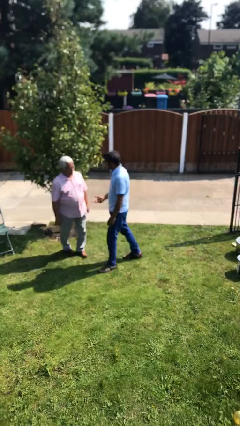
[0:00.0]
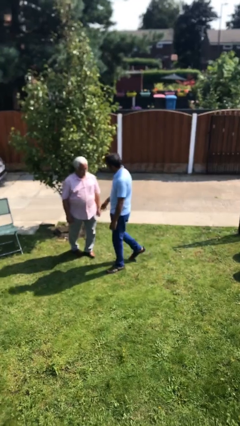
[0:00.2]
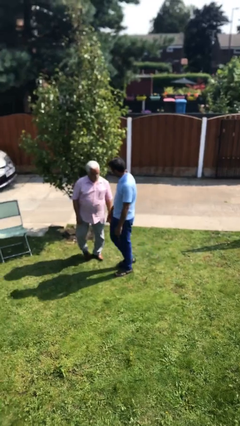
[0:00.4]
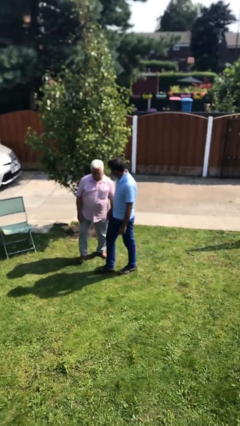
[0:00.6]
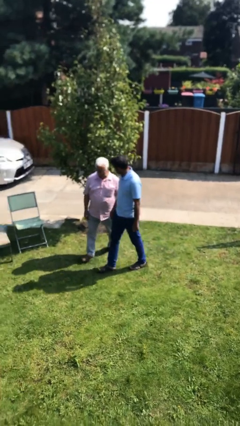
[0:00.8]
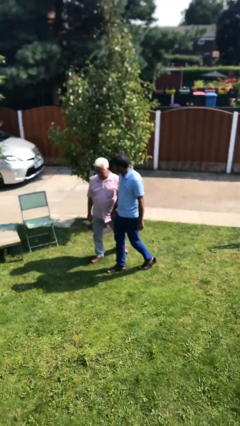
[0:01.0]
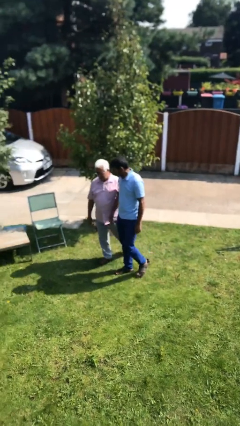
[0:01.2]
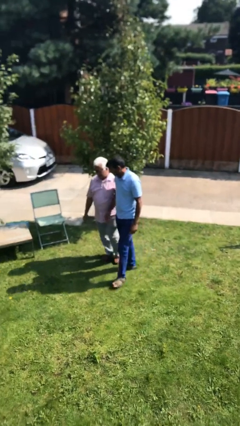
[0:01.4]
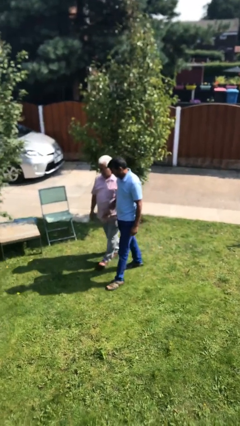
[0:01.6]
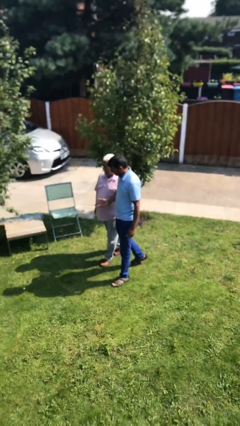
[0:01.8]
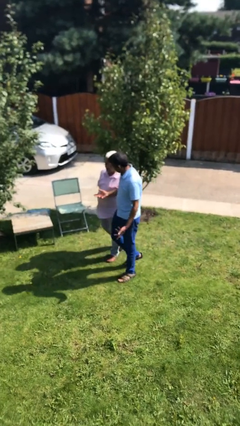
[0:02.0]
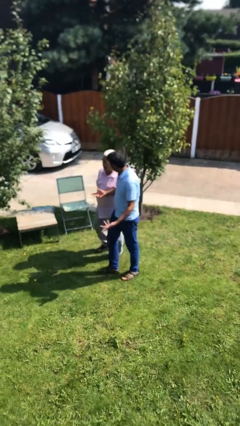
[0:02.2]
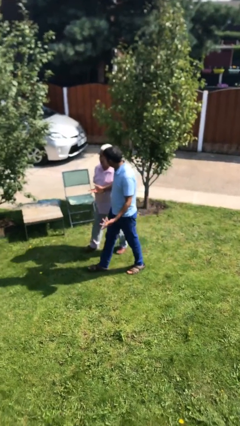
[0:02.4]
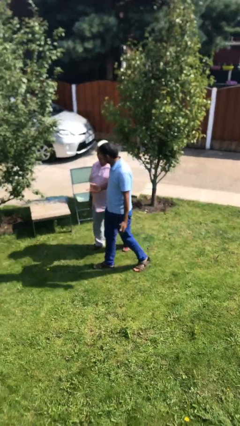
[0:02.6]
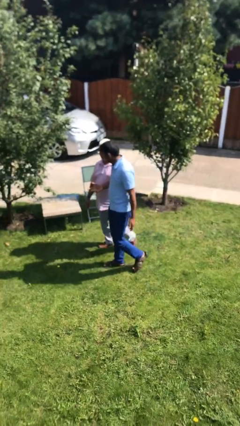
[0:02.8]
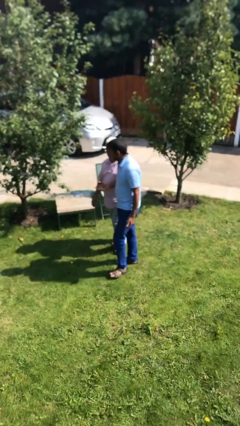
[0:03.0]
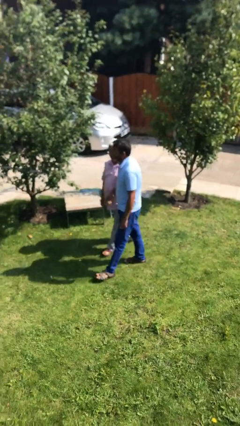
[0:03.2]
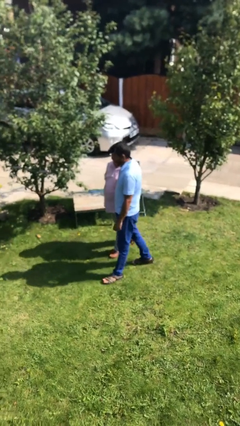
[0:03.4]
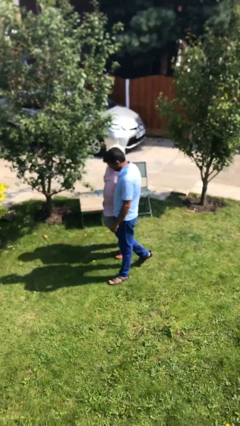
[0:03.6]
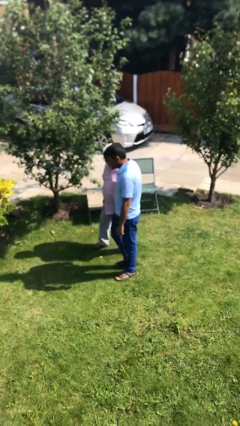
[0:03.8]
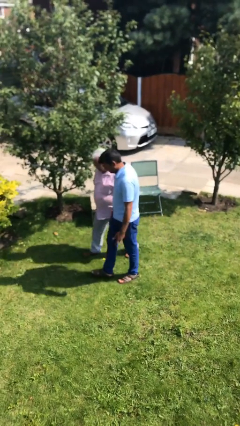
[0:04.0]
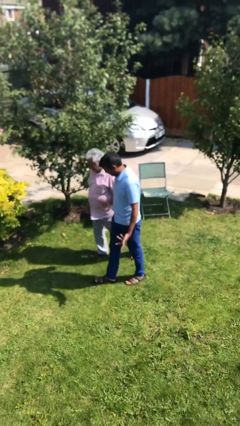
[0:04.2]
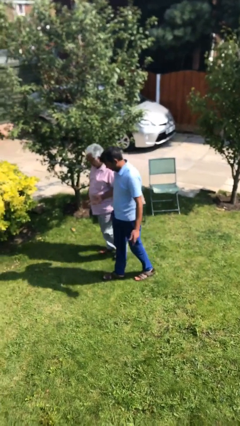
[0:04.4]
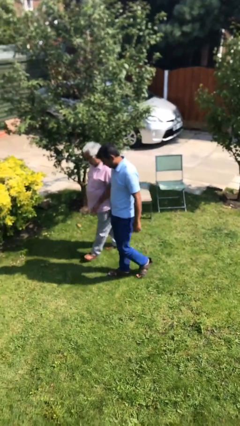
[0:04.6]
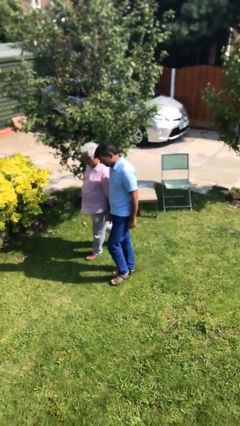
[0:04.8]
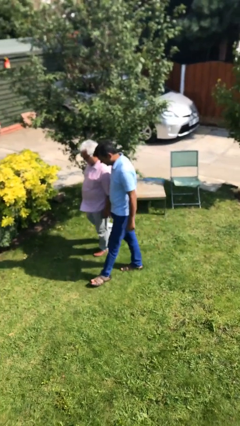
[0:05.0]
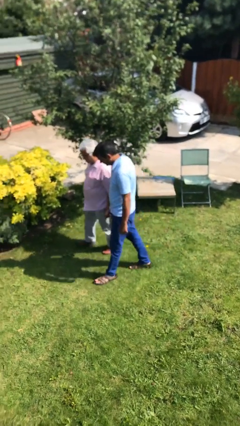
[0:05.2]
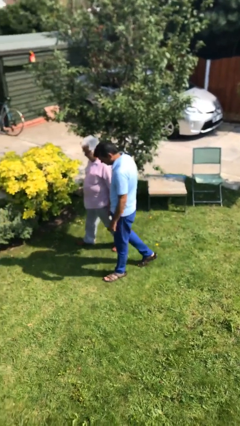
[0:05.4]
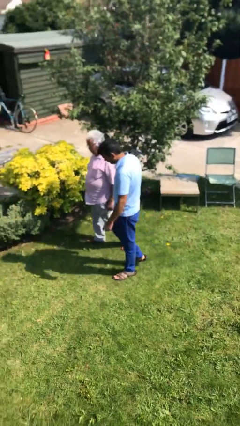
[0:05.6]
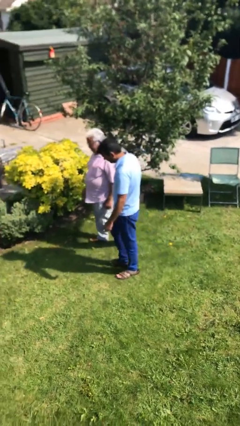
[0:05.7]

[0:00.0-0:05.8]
person talks to person

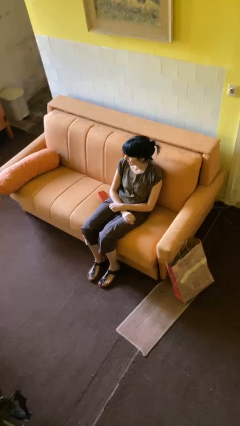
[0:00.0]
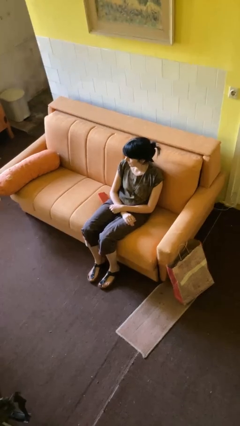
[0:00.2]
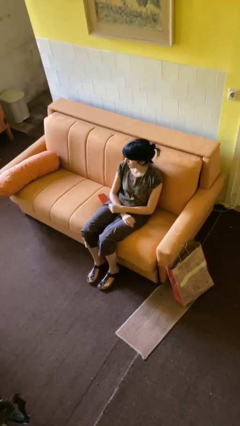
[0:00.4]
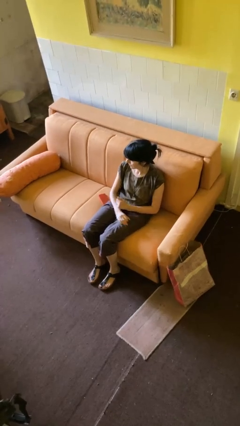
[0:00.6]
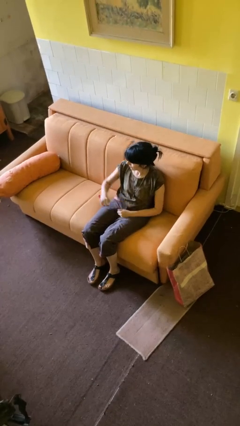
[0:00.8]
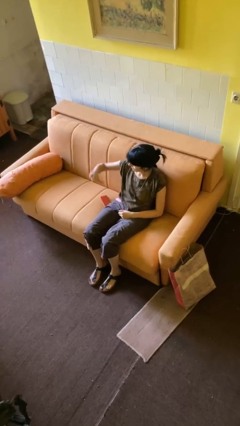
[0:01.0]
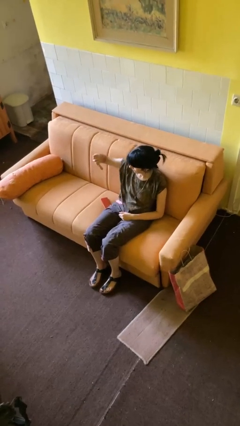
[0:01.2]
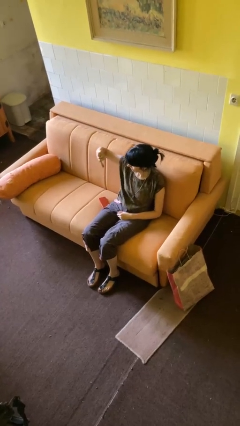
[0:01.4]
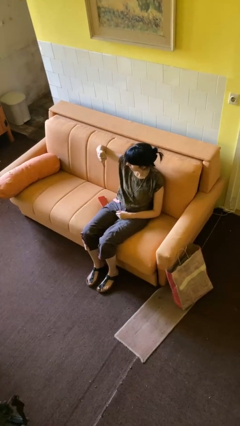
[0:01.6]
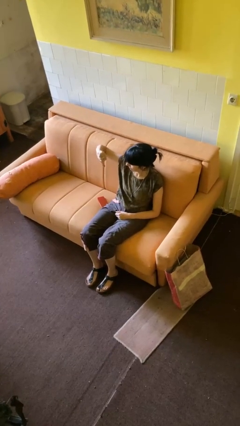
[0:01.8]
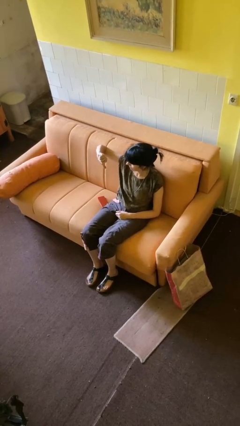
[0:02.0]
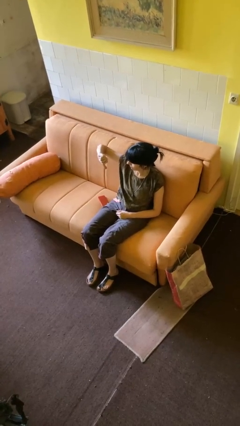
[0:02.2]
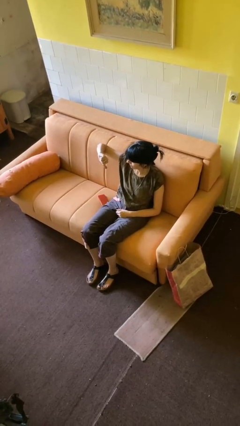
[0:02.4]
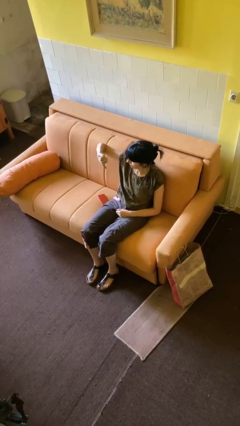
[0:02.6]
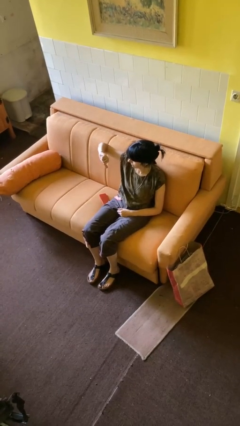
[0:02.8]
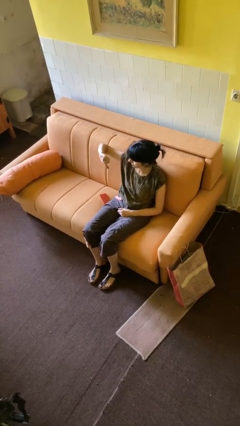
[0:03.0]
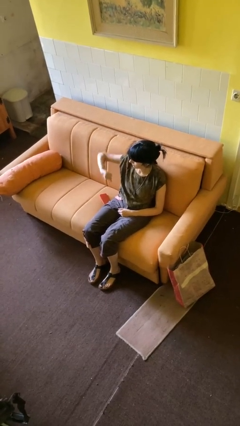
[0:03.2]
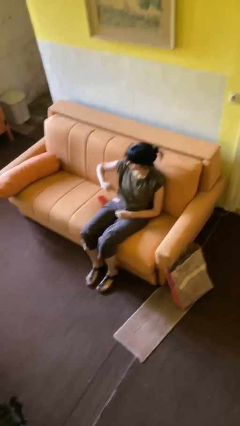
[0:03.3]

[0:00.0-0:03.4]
person gestures thumbs down

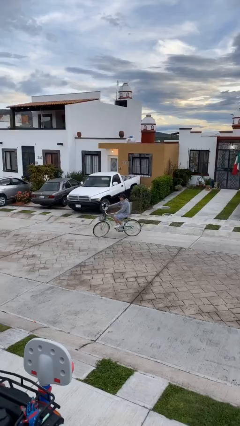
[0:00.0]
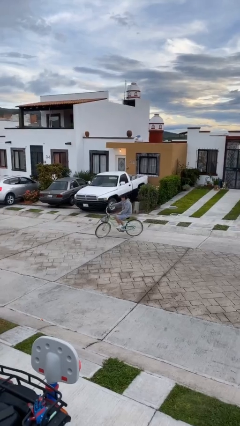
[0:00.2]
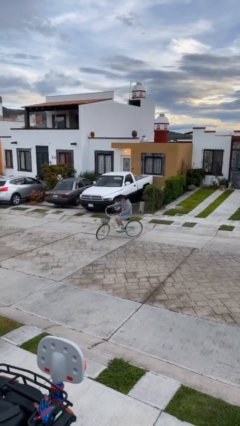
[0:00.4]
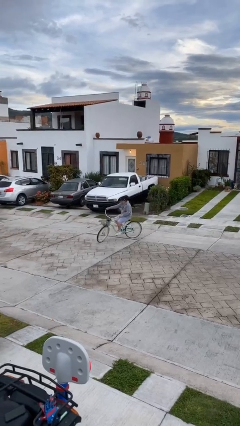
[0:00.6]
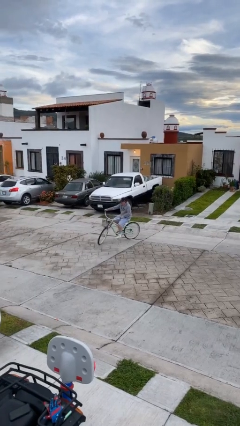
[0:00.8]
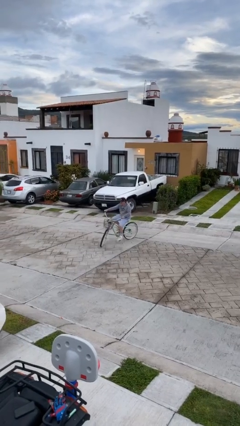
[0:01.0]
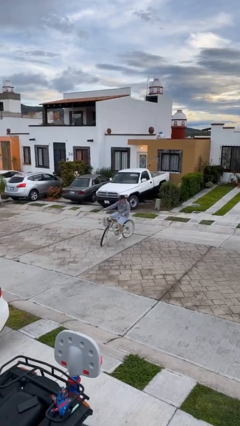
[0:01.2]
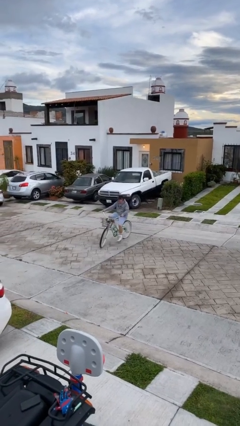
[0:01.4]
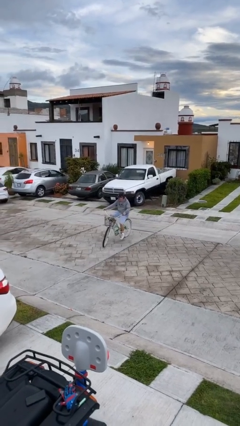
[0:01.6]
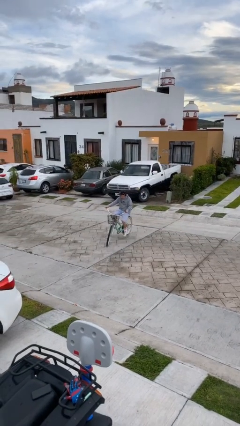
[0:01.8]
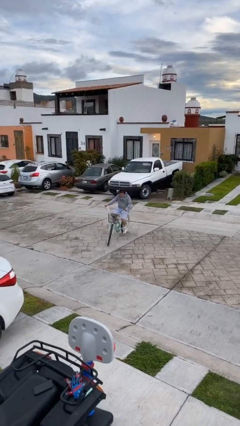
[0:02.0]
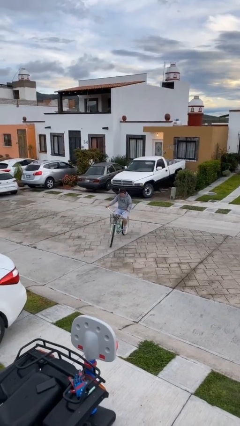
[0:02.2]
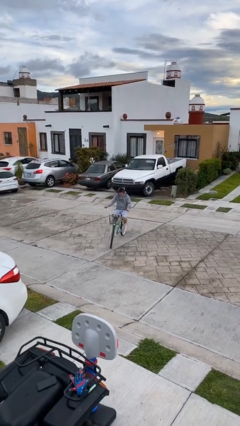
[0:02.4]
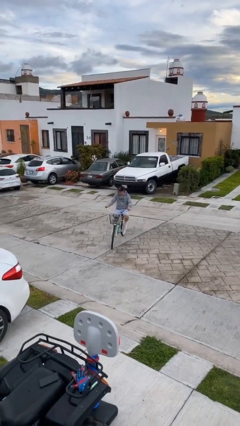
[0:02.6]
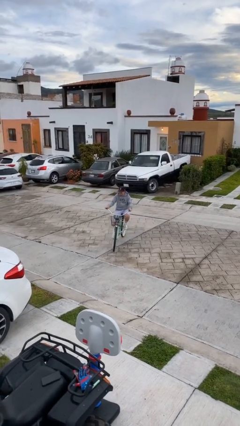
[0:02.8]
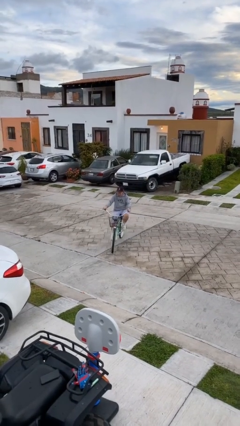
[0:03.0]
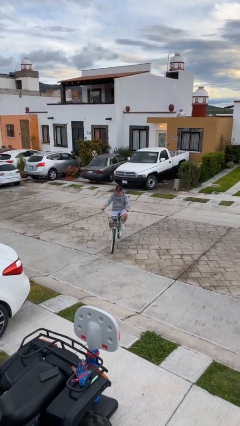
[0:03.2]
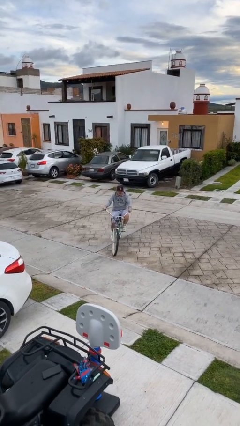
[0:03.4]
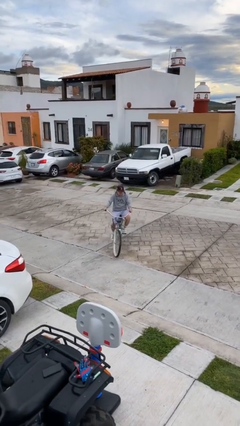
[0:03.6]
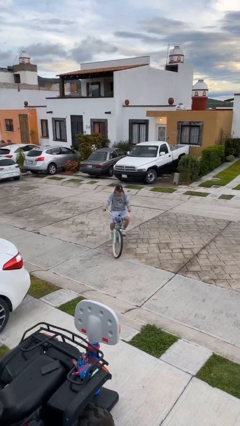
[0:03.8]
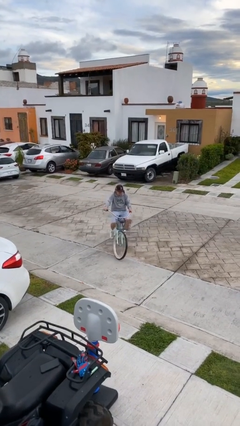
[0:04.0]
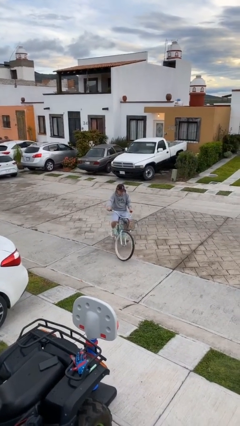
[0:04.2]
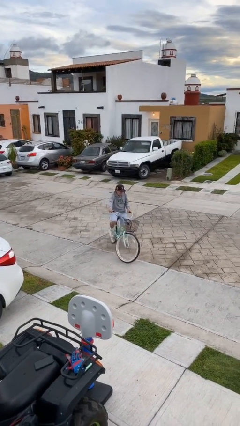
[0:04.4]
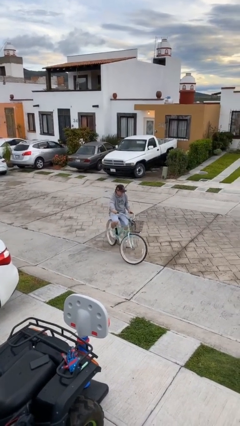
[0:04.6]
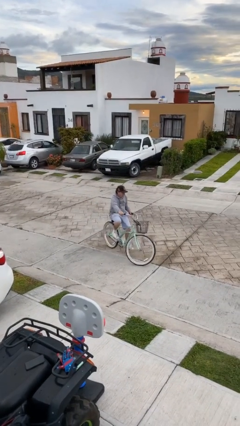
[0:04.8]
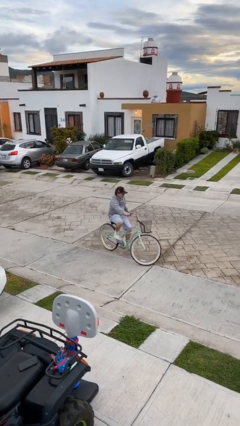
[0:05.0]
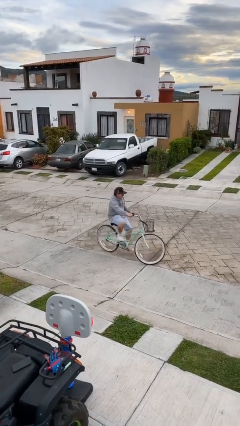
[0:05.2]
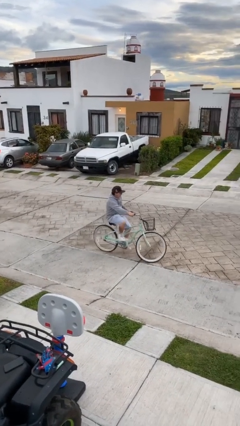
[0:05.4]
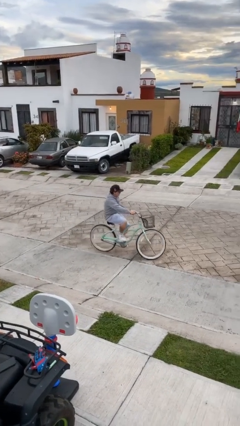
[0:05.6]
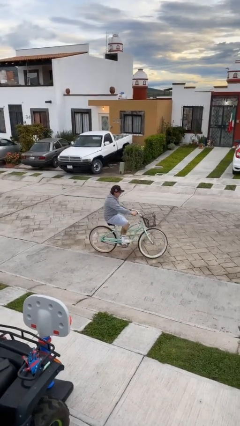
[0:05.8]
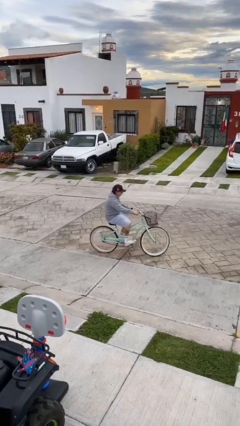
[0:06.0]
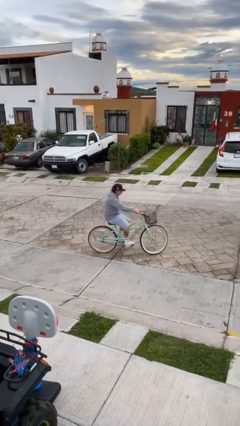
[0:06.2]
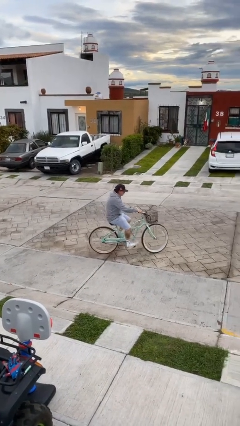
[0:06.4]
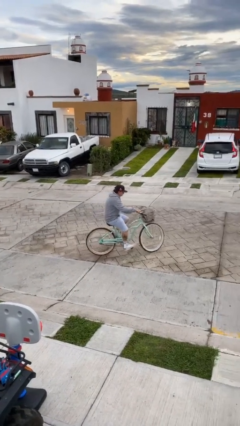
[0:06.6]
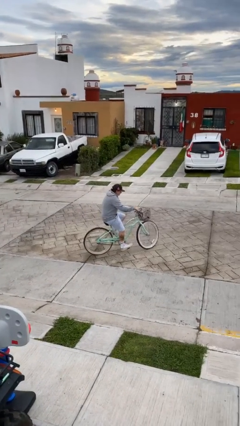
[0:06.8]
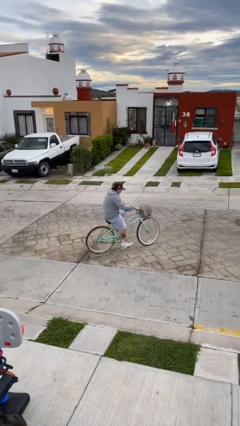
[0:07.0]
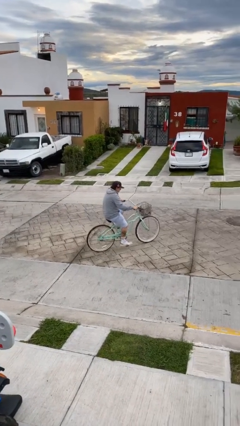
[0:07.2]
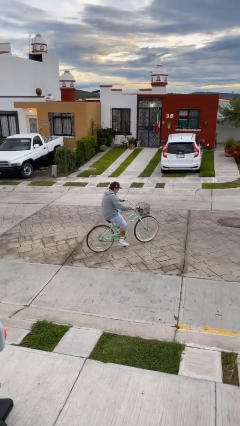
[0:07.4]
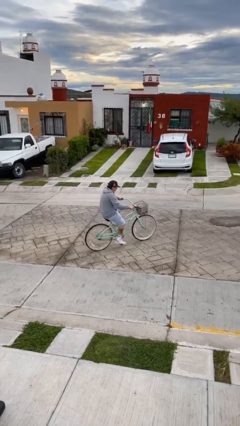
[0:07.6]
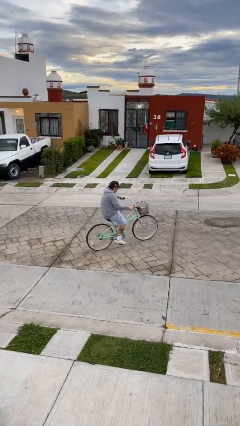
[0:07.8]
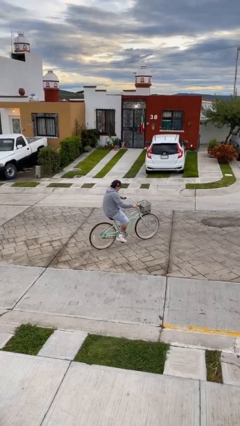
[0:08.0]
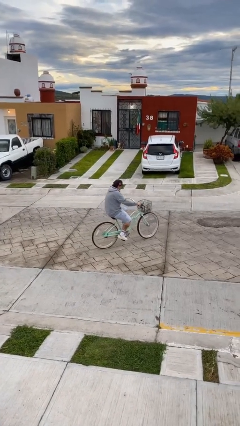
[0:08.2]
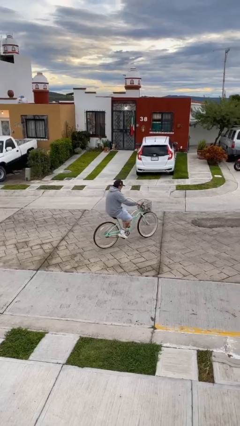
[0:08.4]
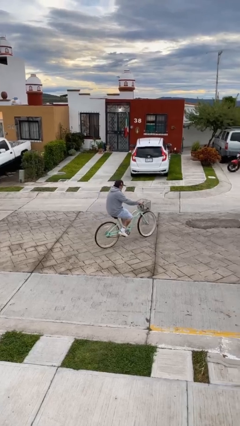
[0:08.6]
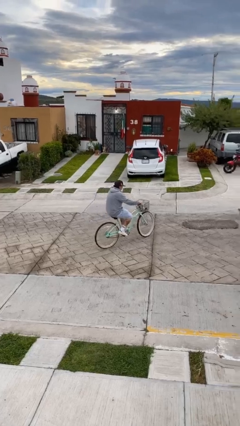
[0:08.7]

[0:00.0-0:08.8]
person rides bicycle
